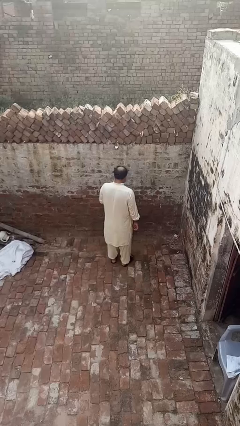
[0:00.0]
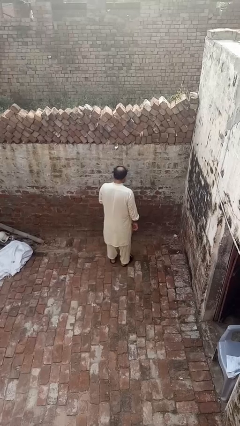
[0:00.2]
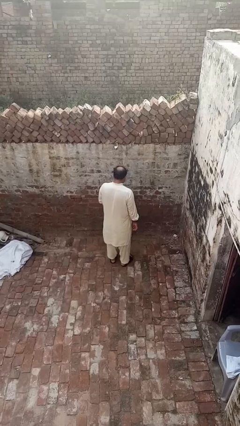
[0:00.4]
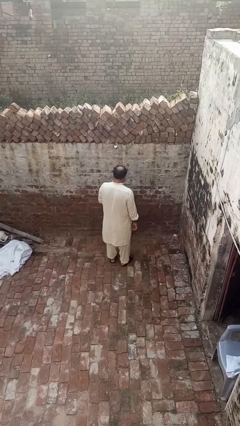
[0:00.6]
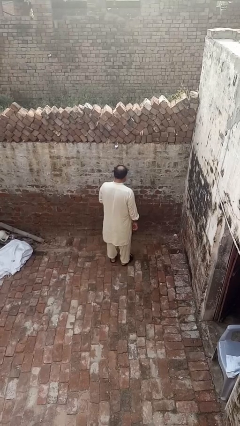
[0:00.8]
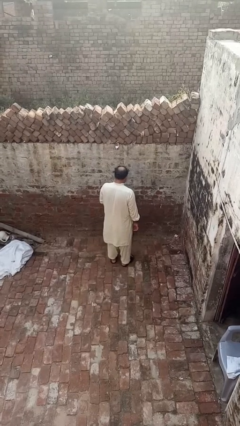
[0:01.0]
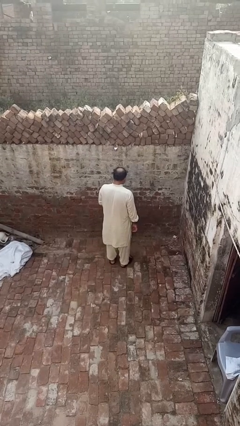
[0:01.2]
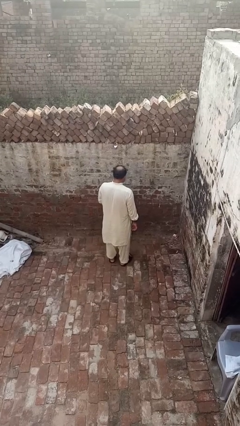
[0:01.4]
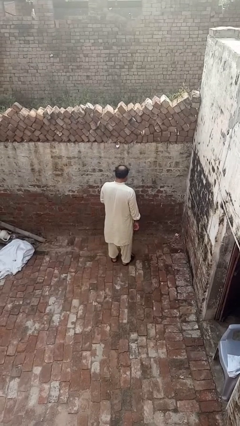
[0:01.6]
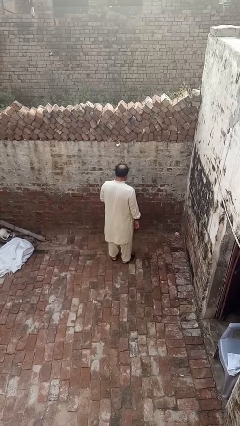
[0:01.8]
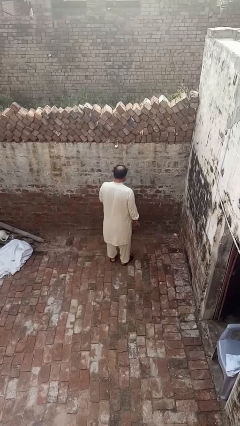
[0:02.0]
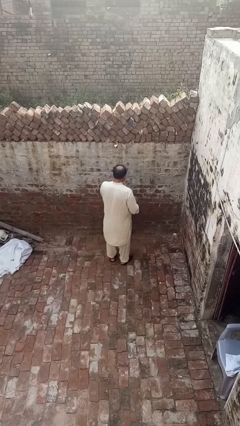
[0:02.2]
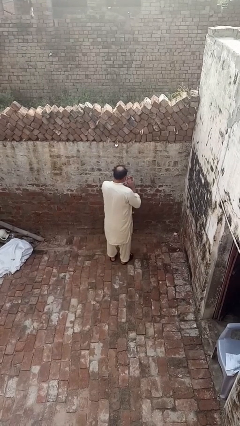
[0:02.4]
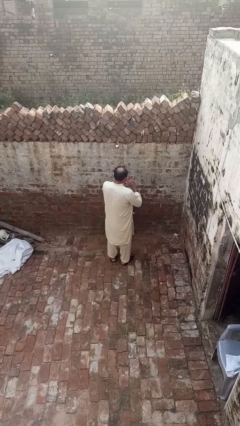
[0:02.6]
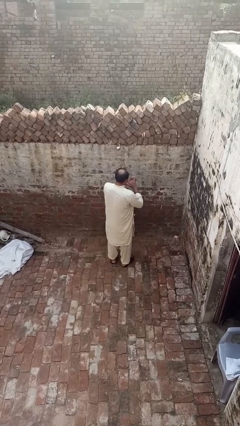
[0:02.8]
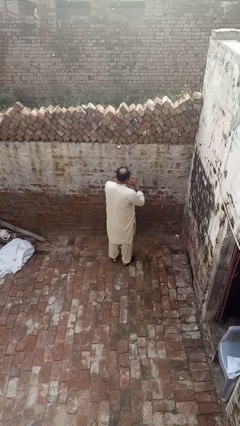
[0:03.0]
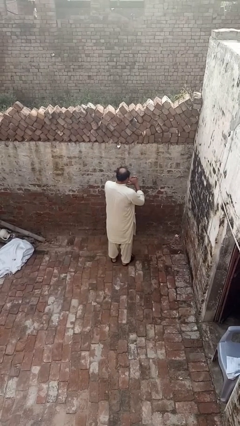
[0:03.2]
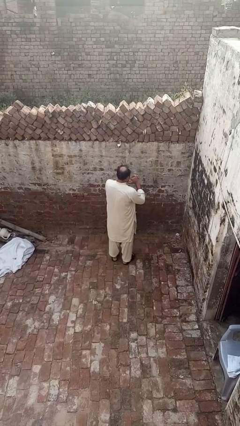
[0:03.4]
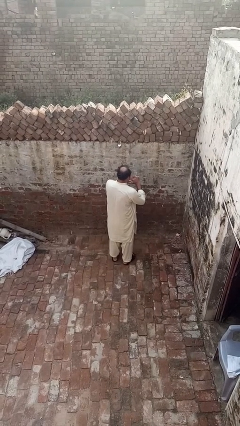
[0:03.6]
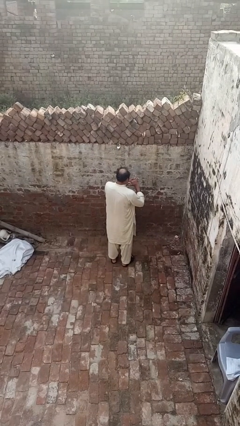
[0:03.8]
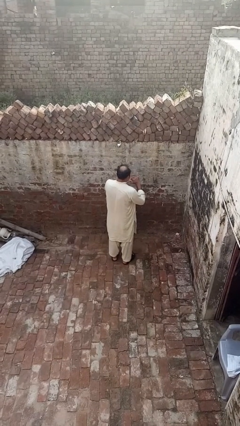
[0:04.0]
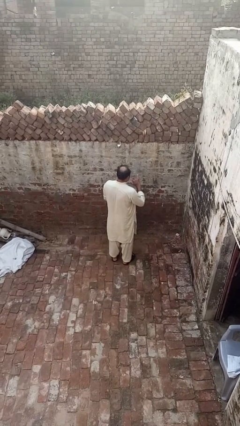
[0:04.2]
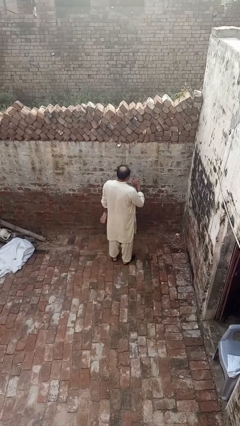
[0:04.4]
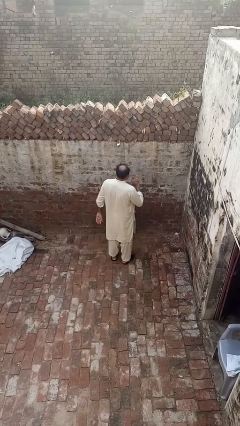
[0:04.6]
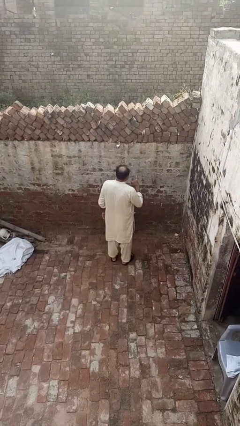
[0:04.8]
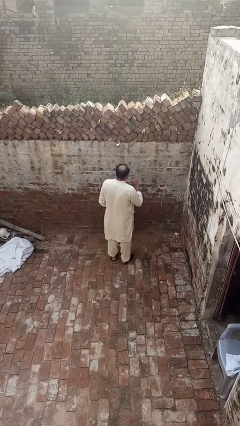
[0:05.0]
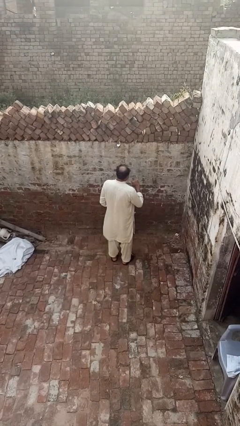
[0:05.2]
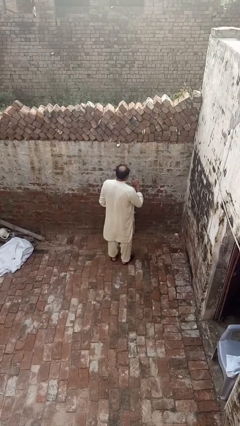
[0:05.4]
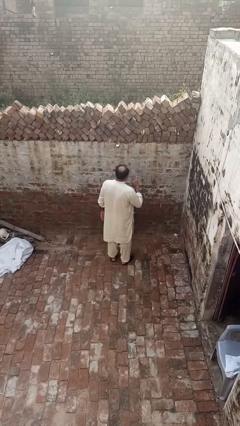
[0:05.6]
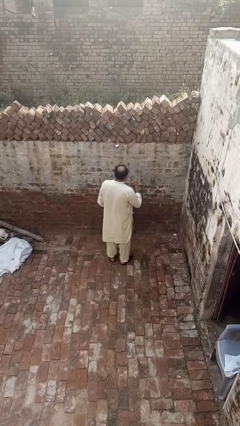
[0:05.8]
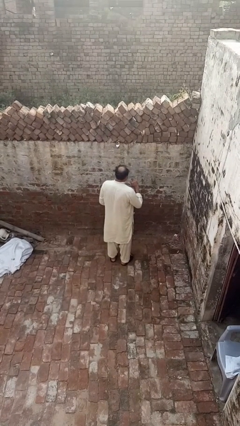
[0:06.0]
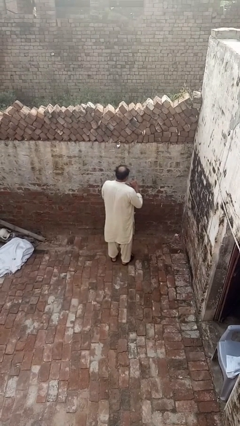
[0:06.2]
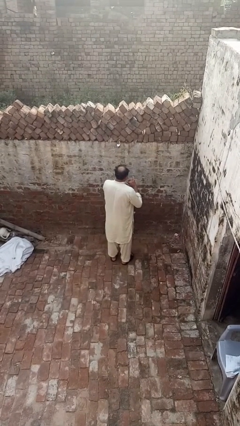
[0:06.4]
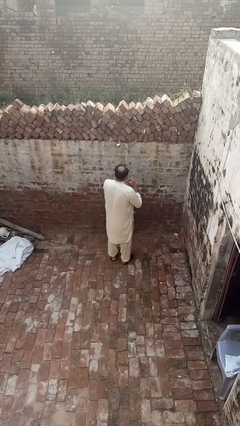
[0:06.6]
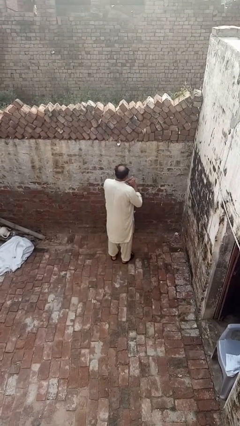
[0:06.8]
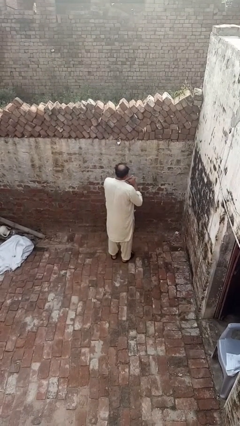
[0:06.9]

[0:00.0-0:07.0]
person puts on ring

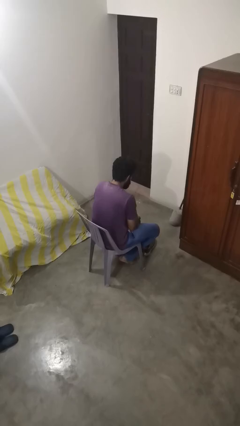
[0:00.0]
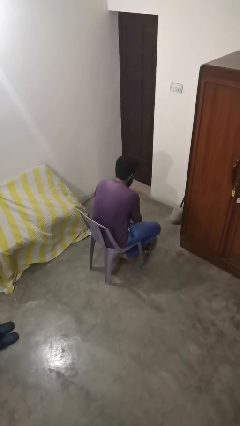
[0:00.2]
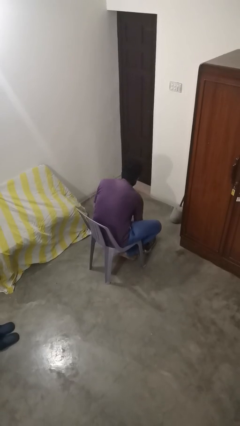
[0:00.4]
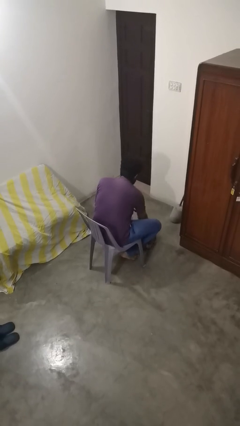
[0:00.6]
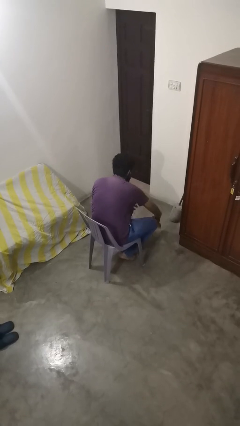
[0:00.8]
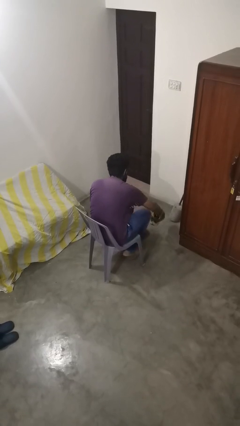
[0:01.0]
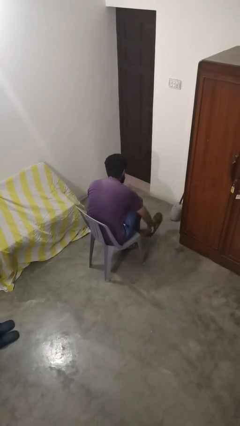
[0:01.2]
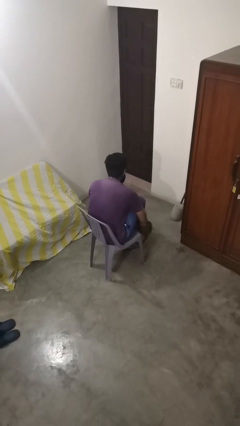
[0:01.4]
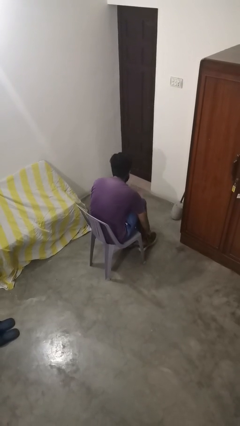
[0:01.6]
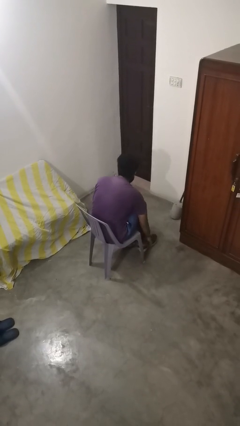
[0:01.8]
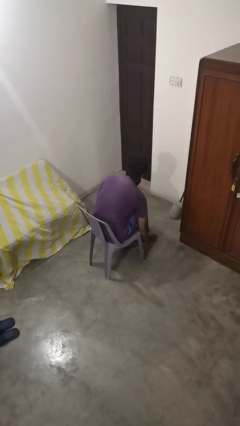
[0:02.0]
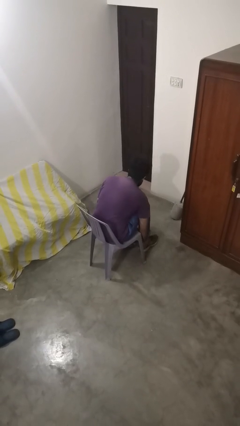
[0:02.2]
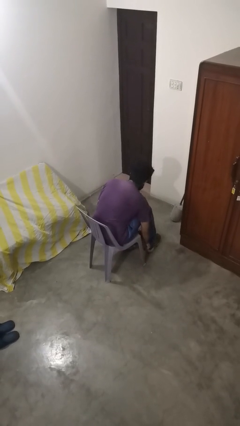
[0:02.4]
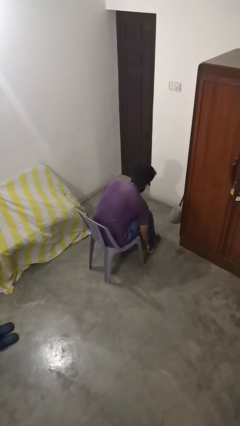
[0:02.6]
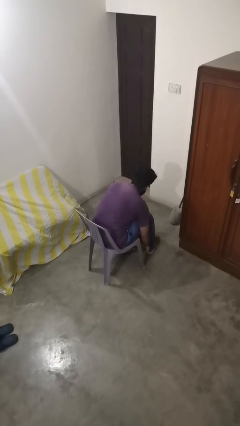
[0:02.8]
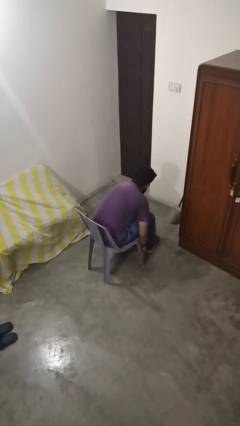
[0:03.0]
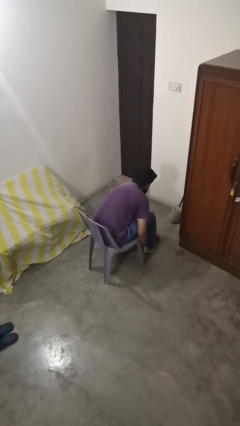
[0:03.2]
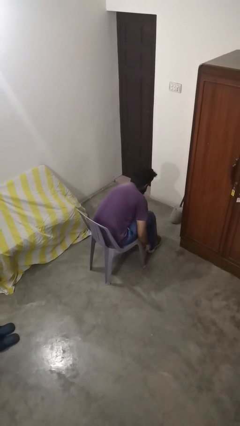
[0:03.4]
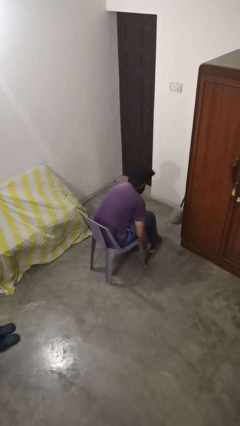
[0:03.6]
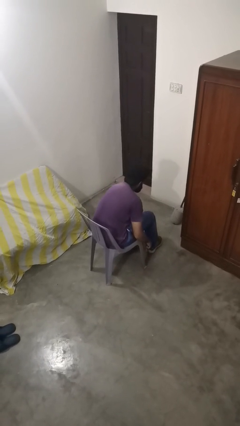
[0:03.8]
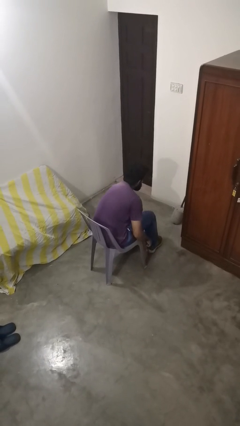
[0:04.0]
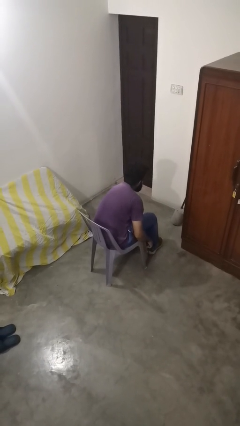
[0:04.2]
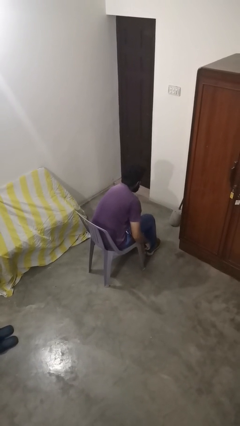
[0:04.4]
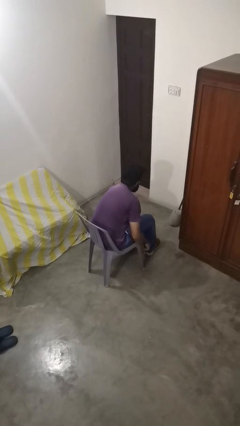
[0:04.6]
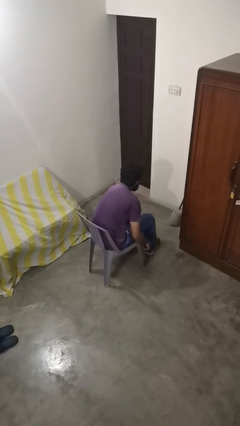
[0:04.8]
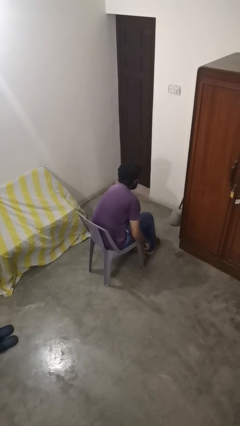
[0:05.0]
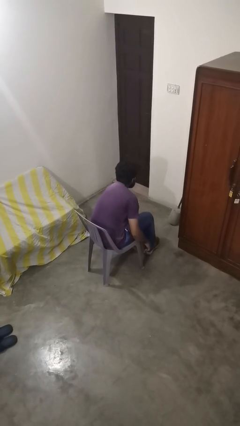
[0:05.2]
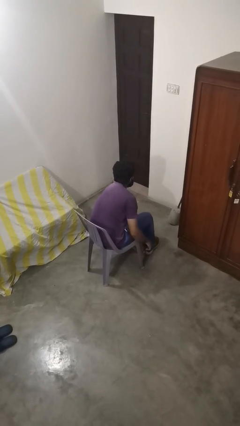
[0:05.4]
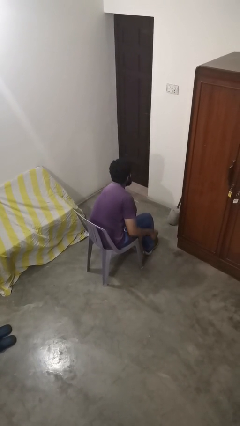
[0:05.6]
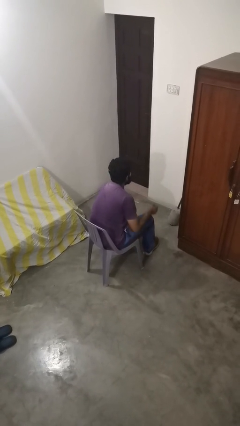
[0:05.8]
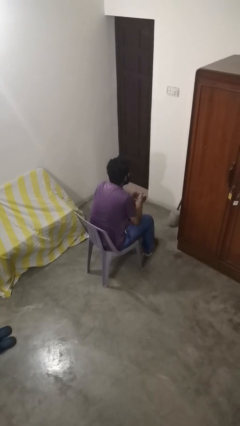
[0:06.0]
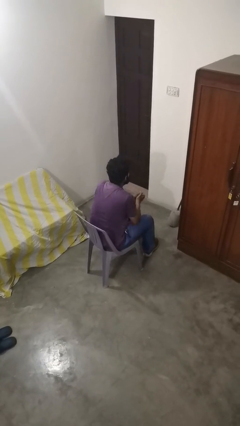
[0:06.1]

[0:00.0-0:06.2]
person puts on shoes

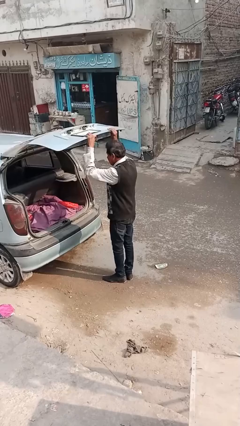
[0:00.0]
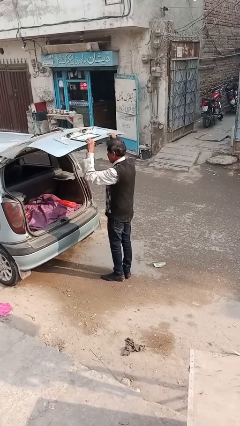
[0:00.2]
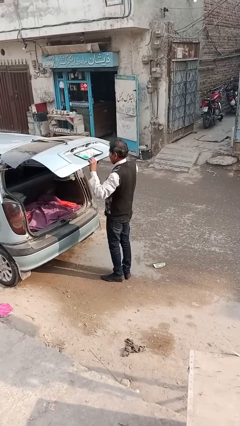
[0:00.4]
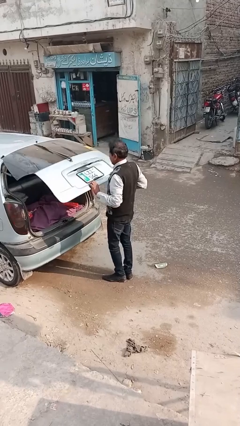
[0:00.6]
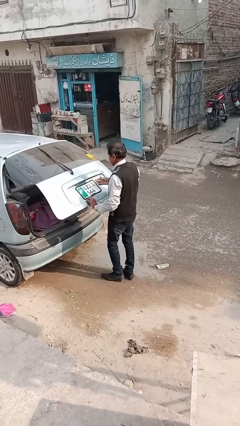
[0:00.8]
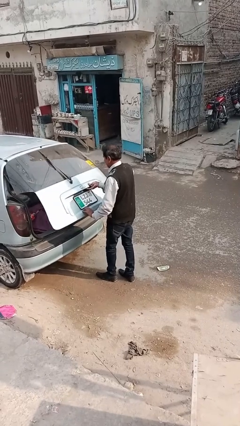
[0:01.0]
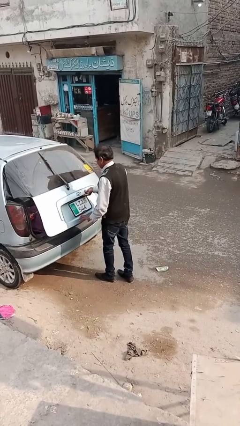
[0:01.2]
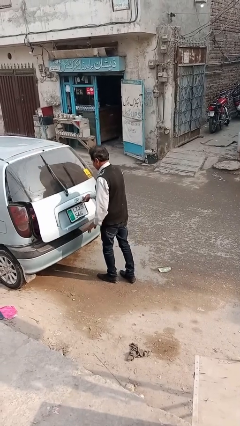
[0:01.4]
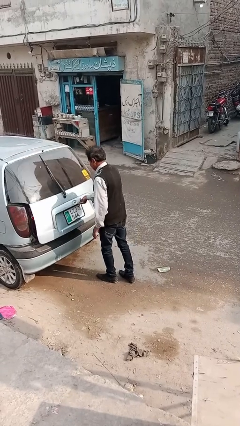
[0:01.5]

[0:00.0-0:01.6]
person closes car trunk

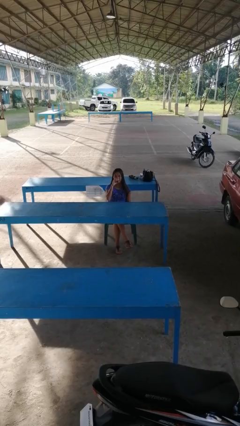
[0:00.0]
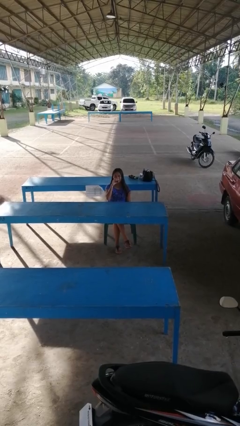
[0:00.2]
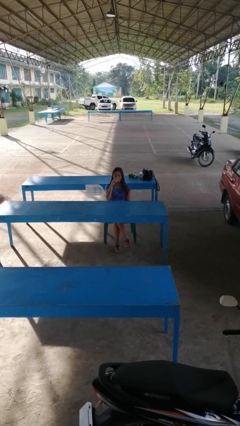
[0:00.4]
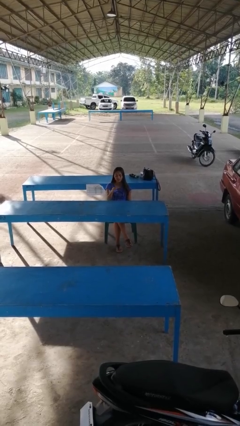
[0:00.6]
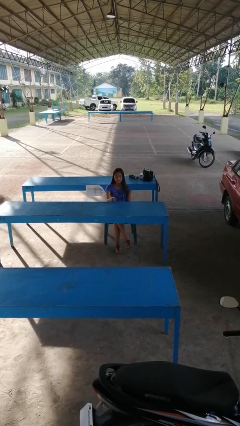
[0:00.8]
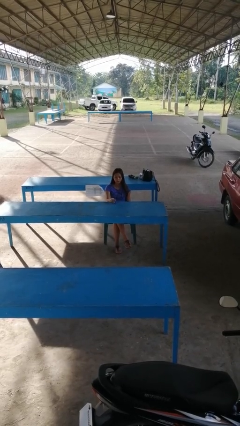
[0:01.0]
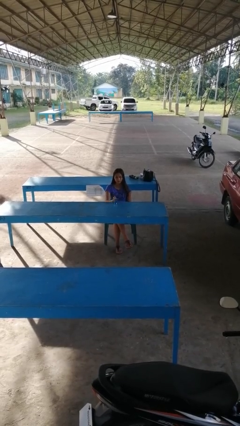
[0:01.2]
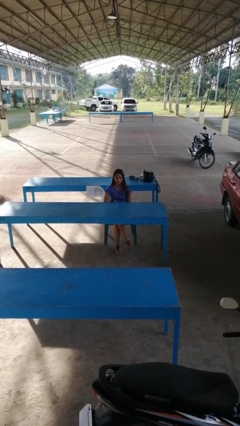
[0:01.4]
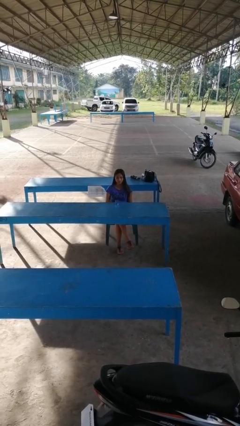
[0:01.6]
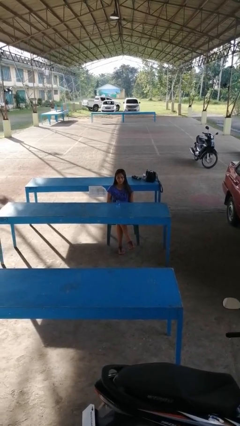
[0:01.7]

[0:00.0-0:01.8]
person puts down object on table

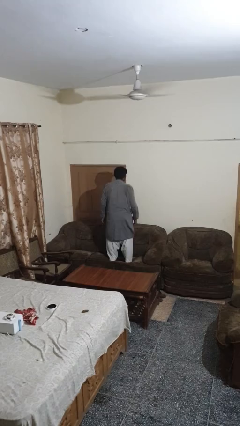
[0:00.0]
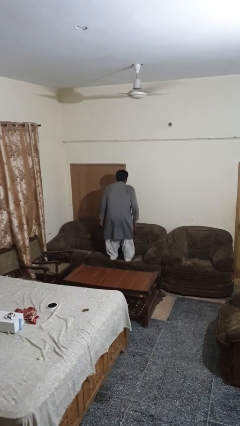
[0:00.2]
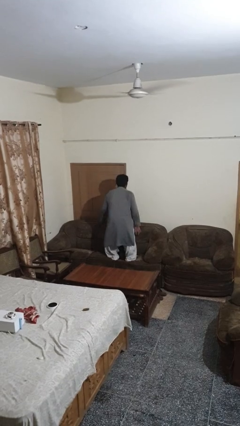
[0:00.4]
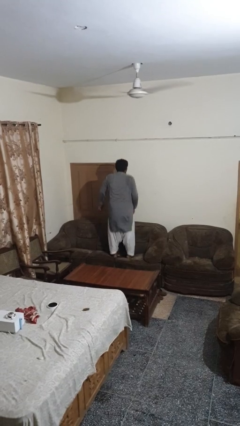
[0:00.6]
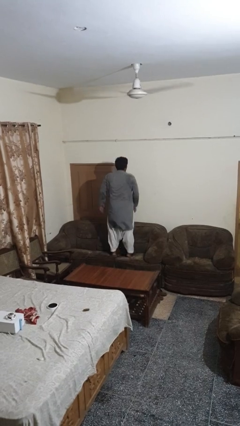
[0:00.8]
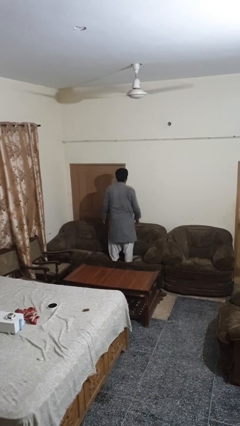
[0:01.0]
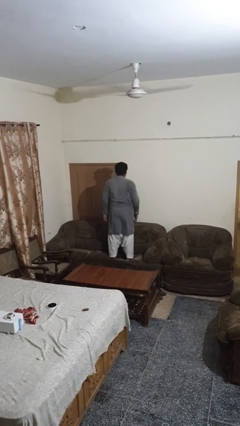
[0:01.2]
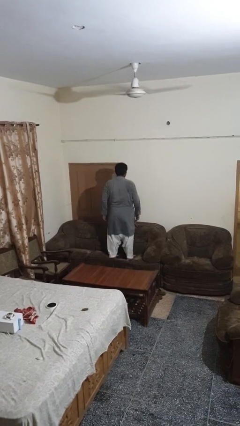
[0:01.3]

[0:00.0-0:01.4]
person jumps on couch
